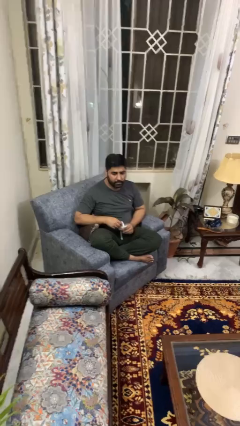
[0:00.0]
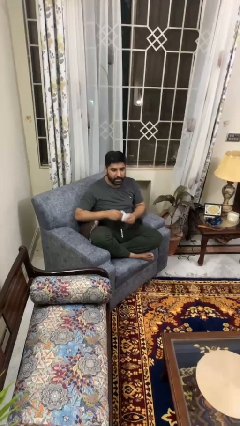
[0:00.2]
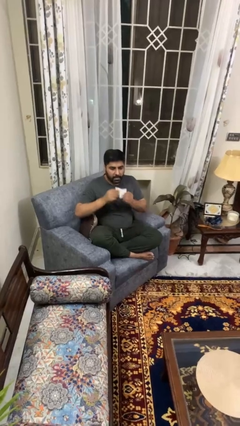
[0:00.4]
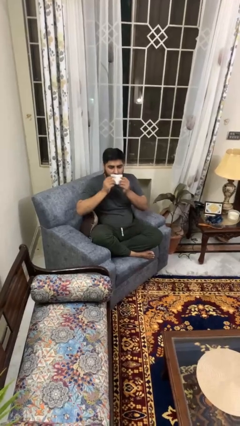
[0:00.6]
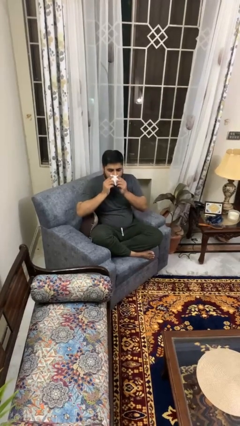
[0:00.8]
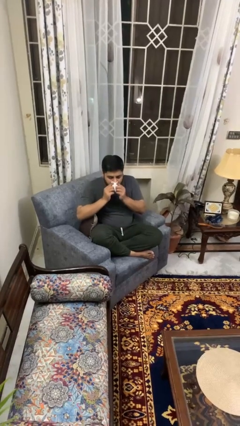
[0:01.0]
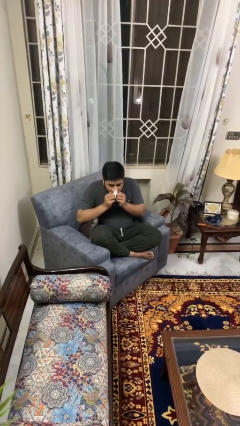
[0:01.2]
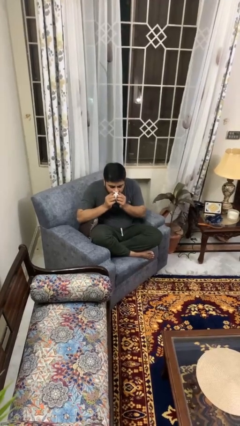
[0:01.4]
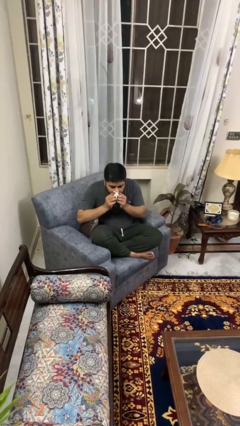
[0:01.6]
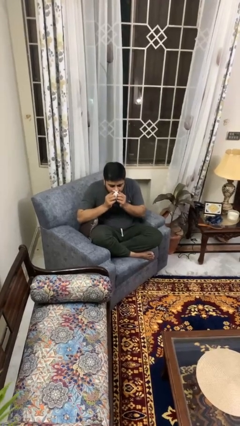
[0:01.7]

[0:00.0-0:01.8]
person blows nose

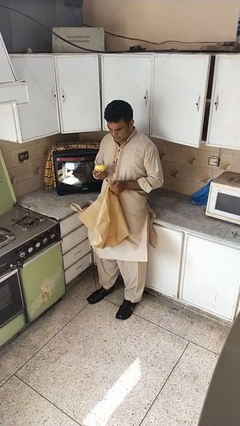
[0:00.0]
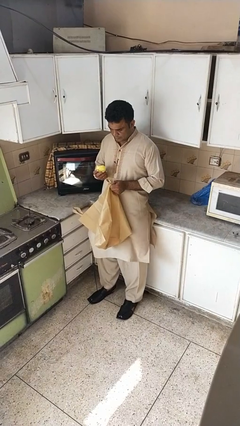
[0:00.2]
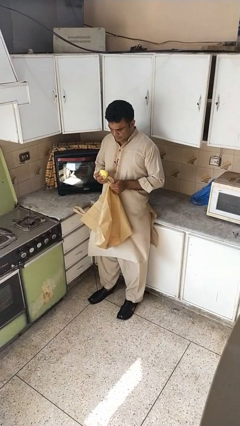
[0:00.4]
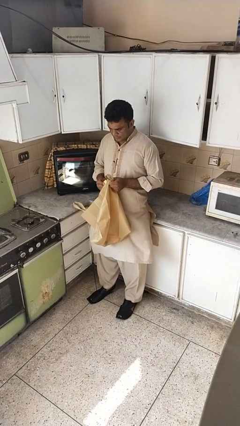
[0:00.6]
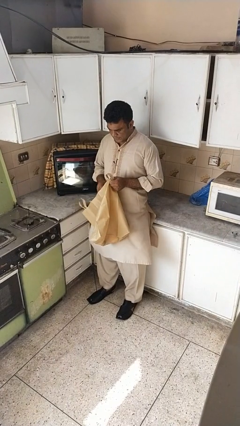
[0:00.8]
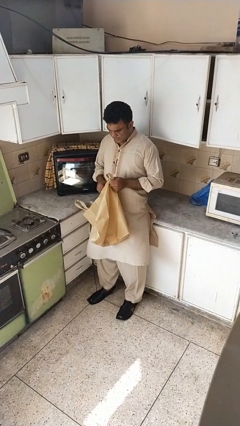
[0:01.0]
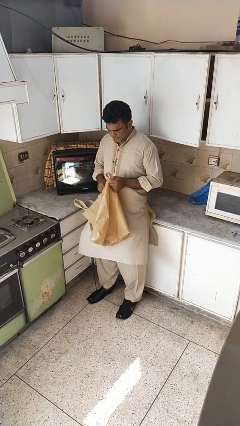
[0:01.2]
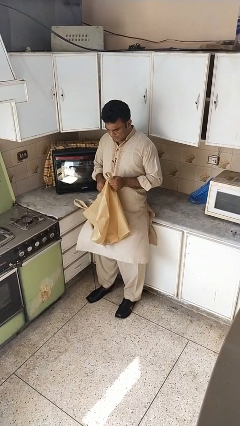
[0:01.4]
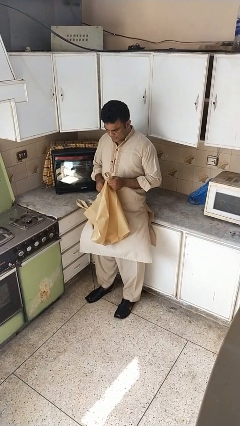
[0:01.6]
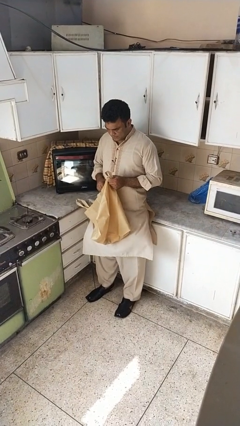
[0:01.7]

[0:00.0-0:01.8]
person puts object into bag

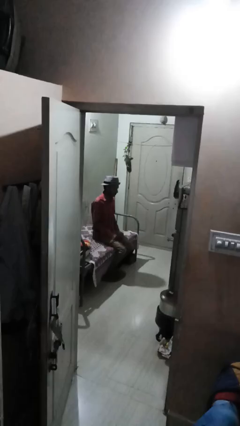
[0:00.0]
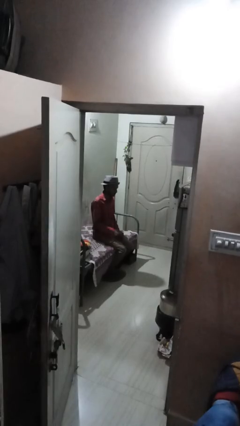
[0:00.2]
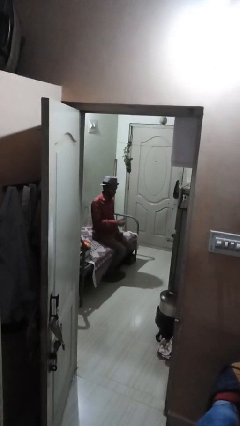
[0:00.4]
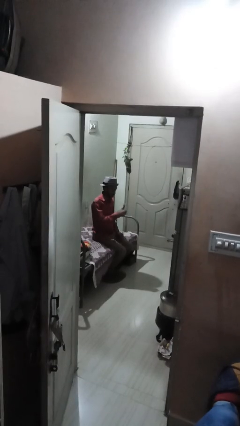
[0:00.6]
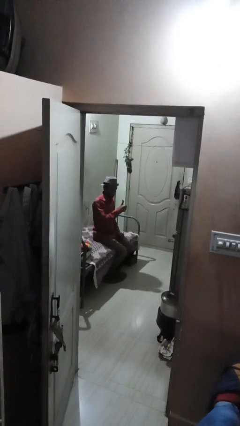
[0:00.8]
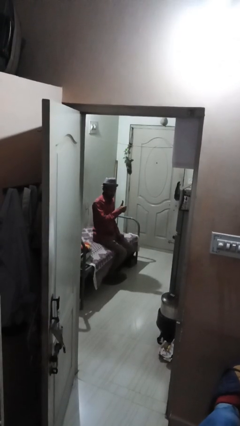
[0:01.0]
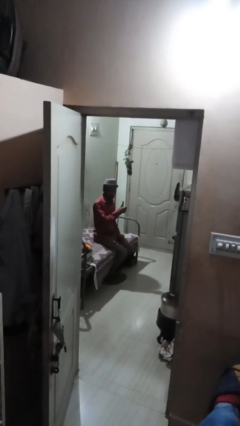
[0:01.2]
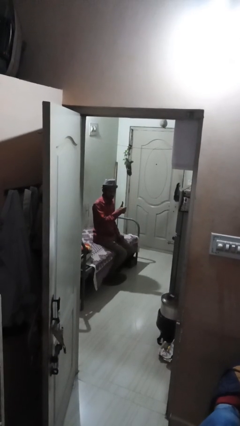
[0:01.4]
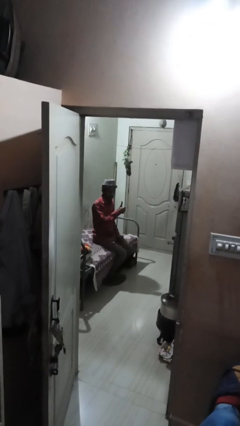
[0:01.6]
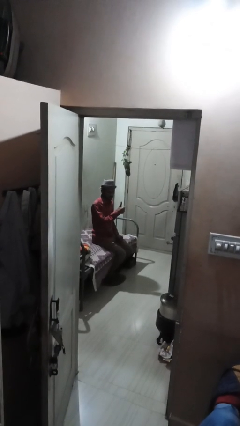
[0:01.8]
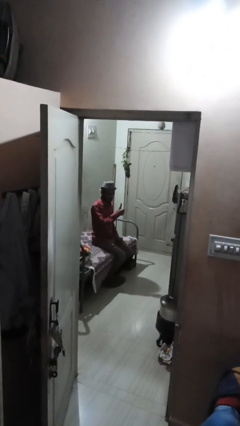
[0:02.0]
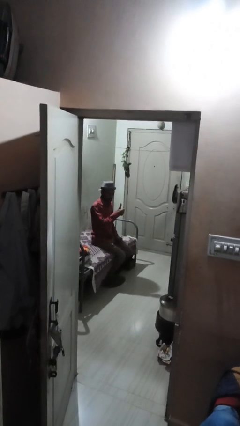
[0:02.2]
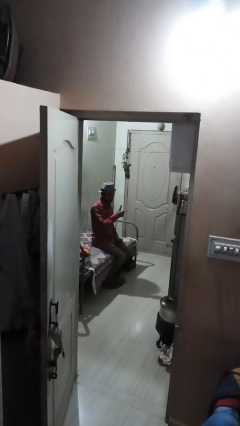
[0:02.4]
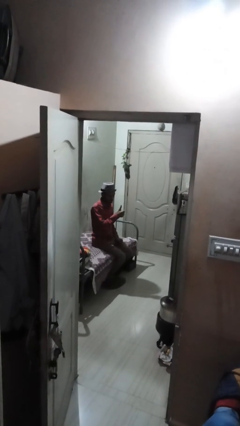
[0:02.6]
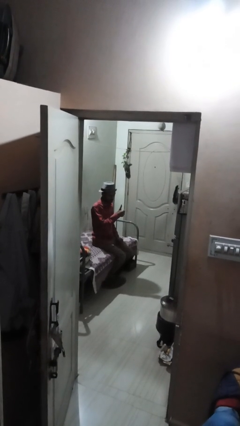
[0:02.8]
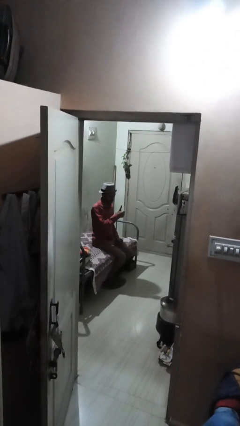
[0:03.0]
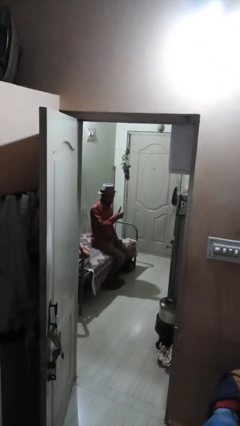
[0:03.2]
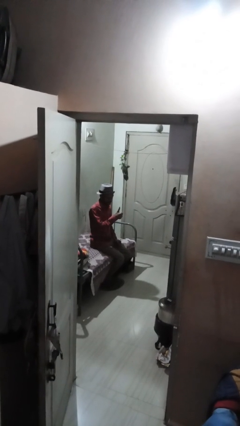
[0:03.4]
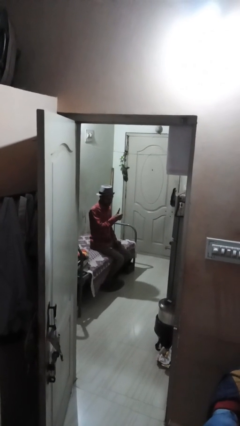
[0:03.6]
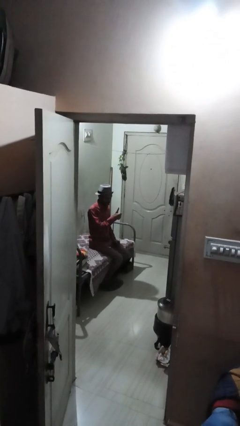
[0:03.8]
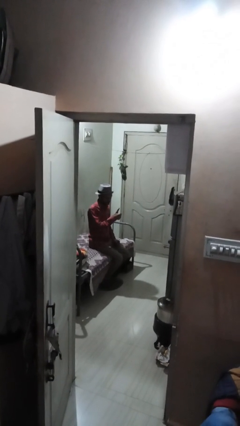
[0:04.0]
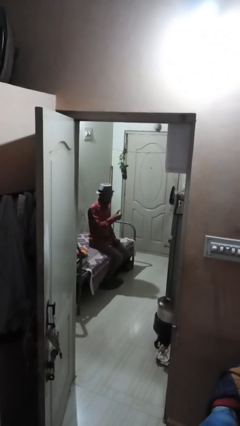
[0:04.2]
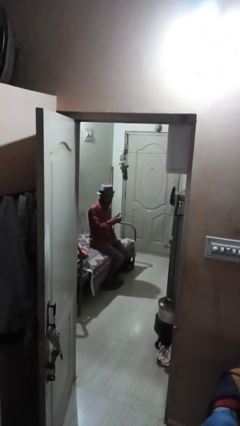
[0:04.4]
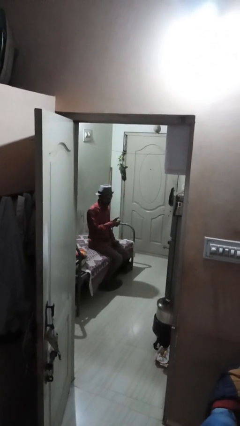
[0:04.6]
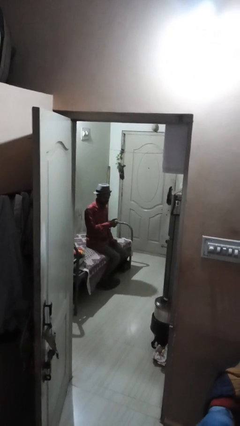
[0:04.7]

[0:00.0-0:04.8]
person gestures thumbs up

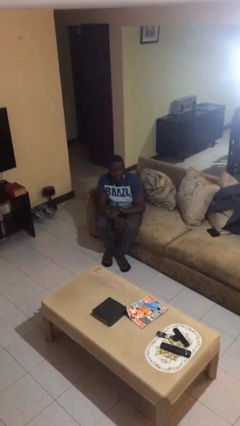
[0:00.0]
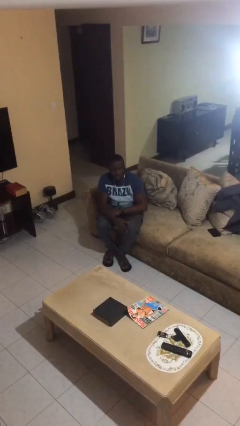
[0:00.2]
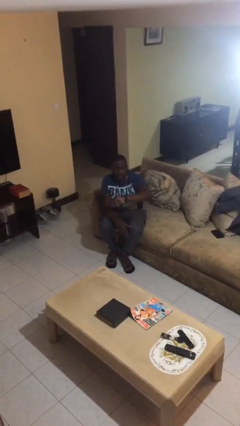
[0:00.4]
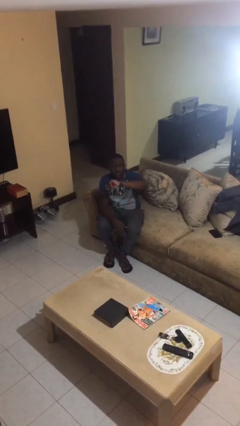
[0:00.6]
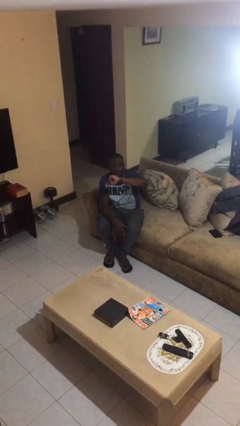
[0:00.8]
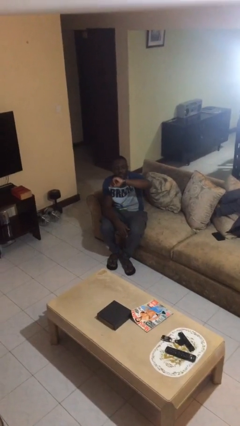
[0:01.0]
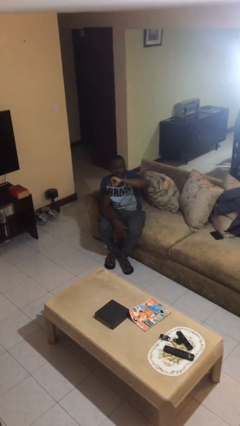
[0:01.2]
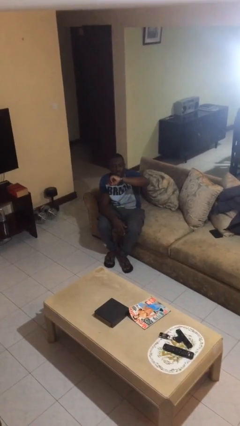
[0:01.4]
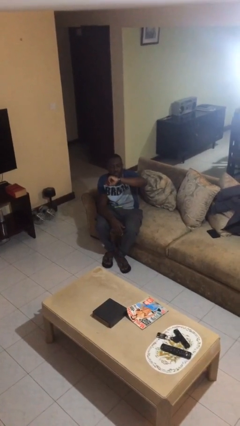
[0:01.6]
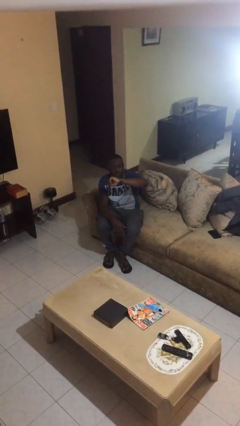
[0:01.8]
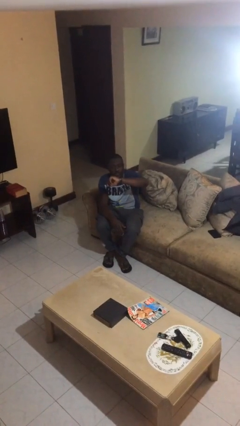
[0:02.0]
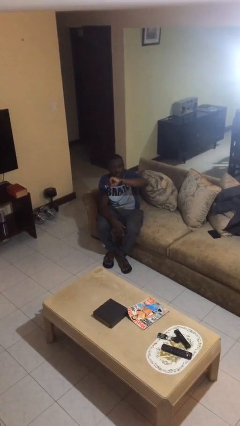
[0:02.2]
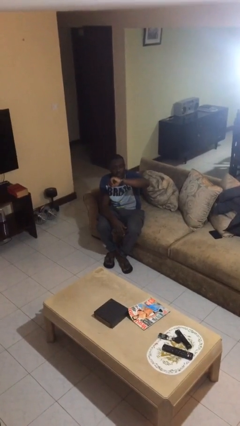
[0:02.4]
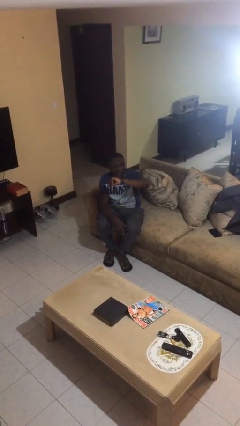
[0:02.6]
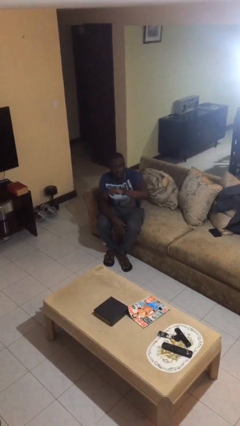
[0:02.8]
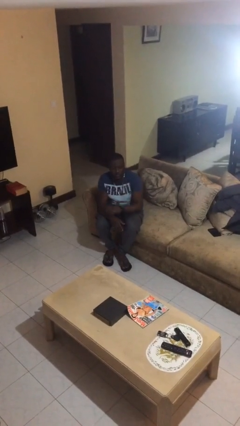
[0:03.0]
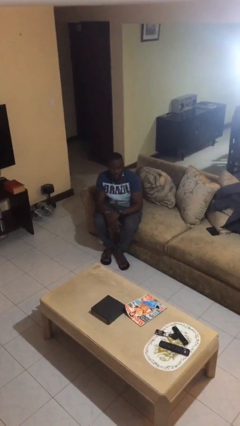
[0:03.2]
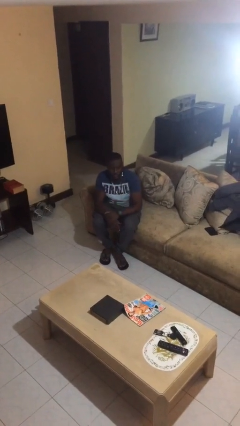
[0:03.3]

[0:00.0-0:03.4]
person looks at wristwatch

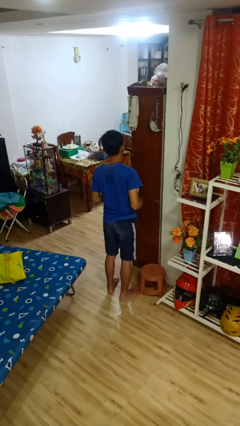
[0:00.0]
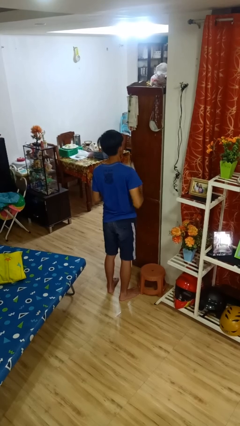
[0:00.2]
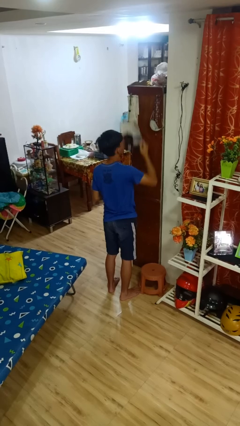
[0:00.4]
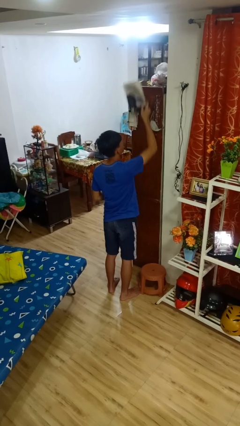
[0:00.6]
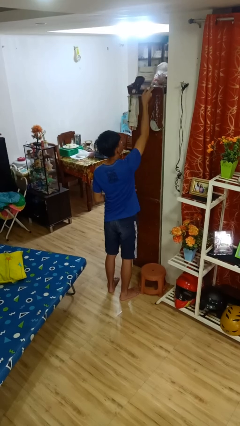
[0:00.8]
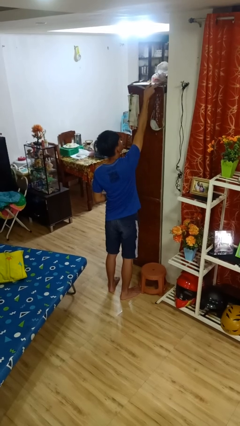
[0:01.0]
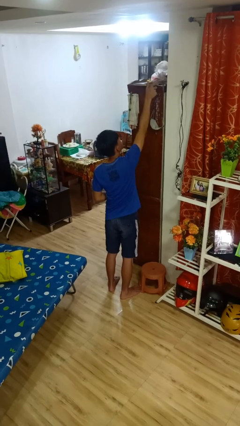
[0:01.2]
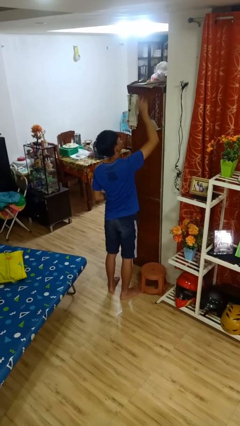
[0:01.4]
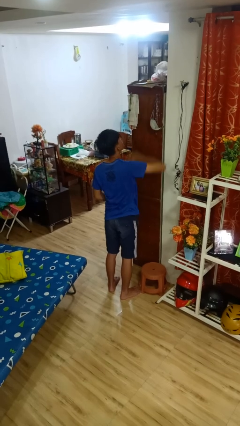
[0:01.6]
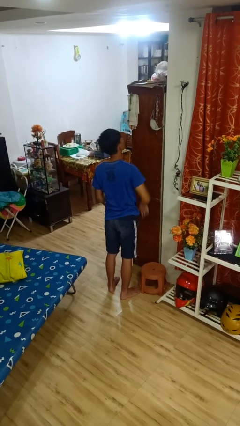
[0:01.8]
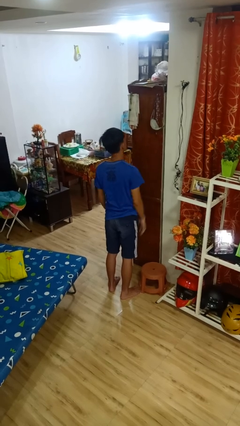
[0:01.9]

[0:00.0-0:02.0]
person puts down object on shelf

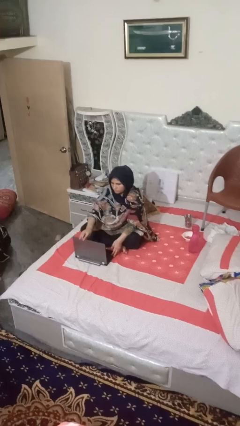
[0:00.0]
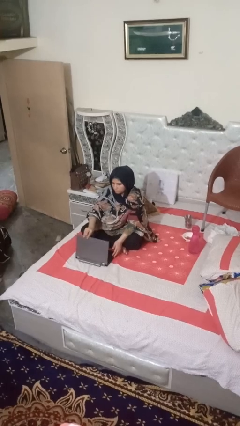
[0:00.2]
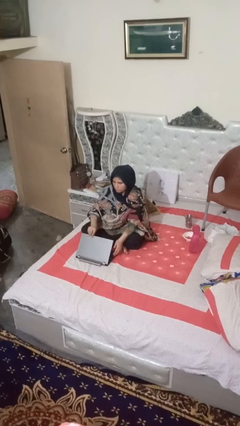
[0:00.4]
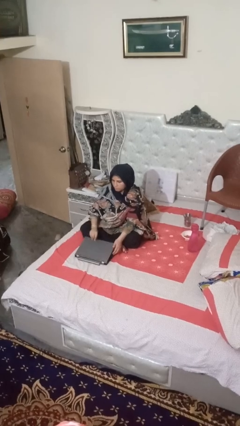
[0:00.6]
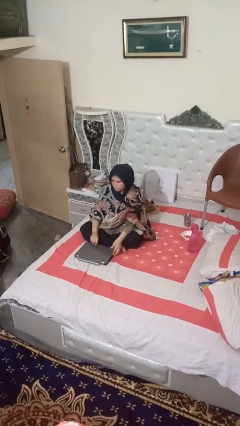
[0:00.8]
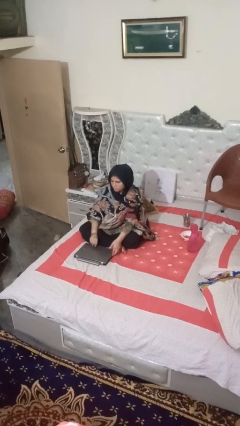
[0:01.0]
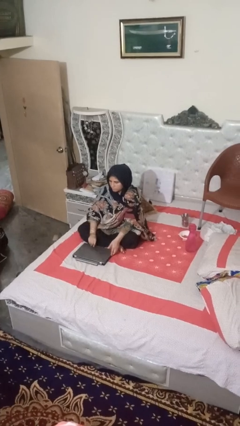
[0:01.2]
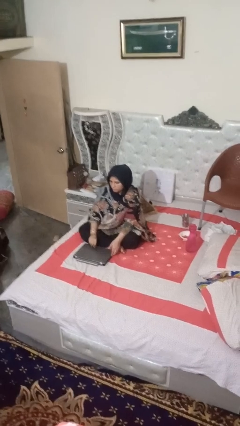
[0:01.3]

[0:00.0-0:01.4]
person closes laptop

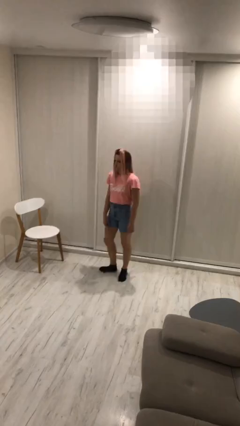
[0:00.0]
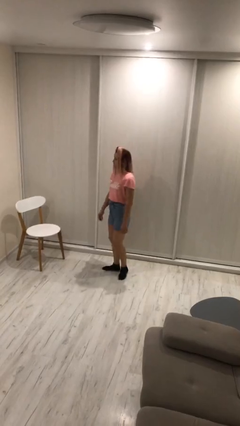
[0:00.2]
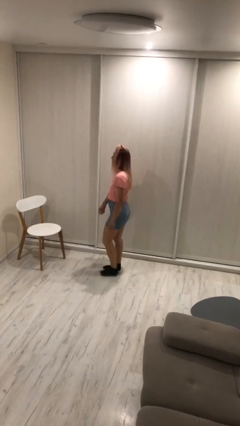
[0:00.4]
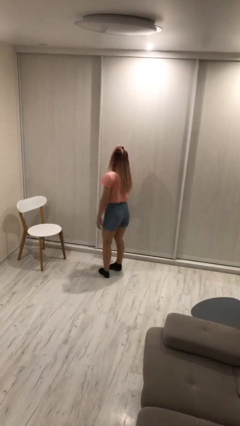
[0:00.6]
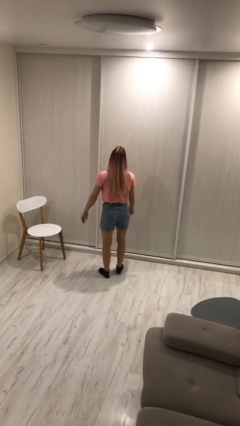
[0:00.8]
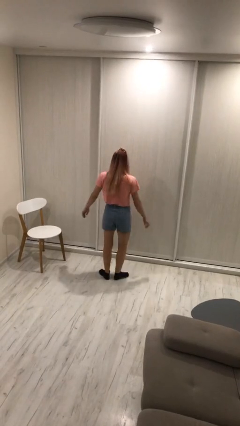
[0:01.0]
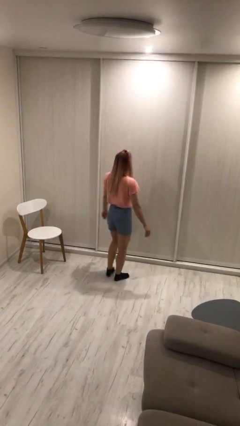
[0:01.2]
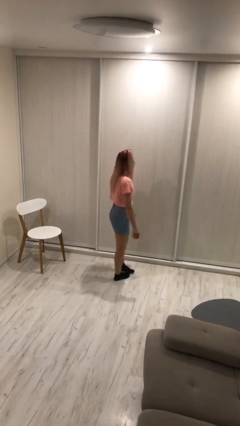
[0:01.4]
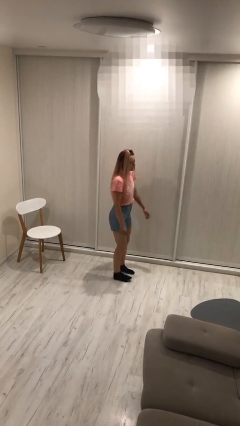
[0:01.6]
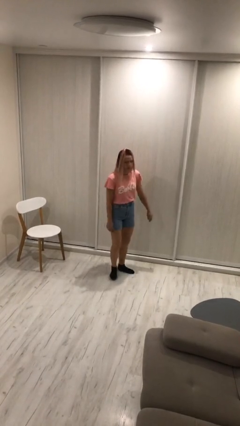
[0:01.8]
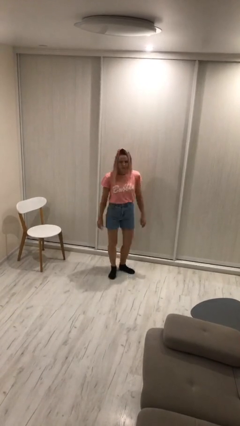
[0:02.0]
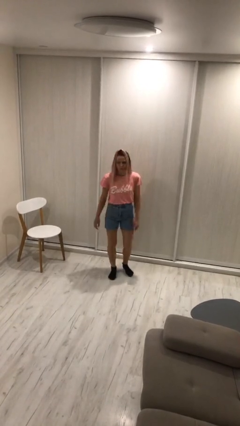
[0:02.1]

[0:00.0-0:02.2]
person twirls
